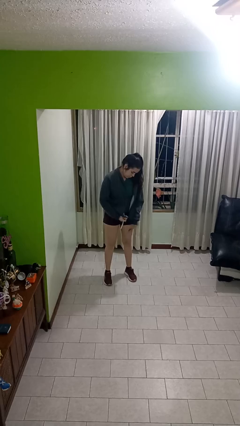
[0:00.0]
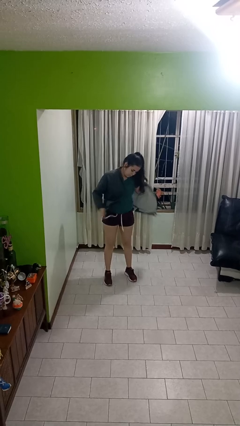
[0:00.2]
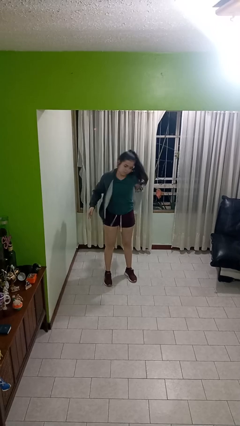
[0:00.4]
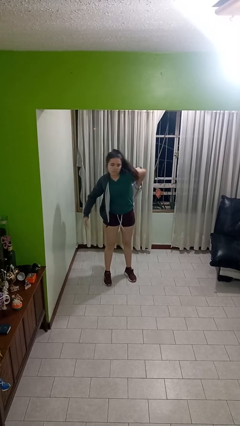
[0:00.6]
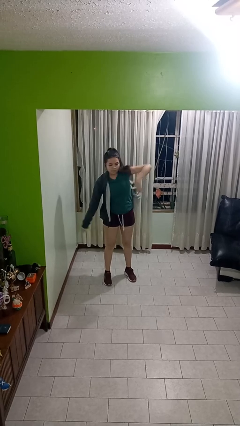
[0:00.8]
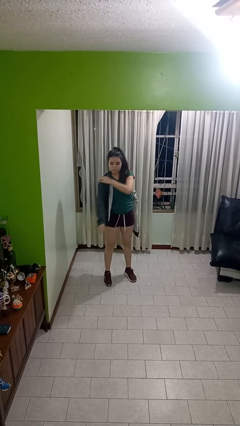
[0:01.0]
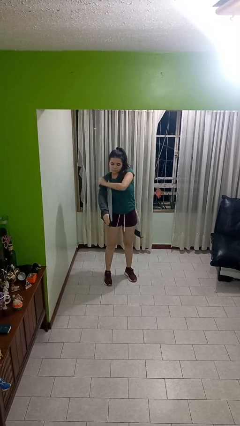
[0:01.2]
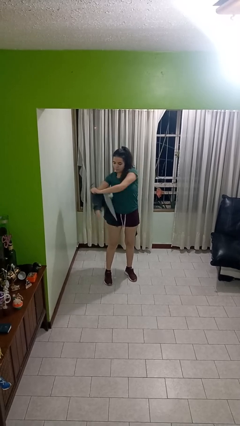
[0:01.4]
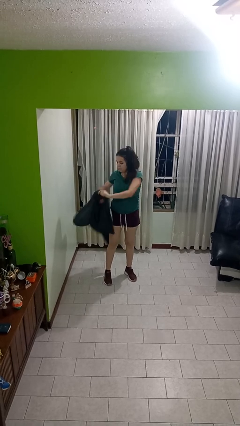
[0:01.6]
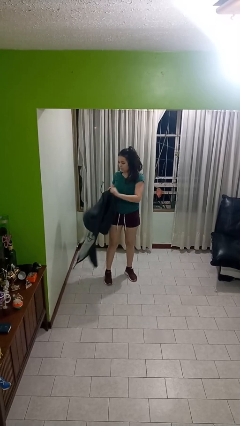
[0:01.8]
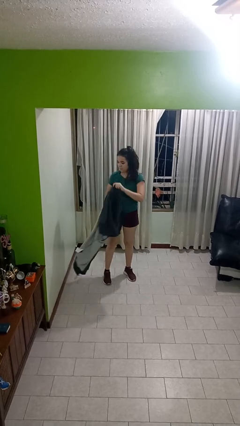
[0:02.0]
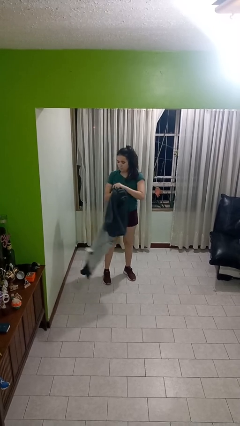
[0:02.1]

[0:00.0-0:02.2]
person takes off jacket

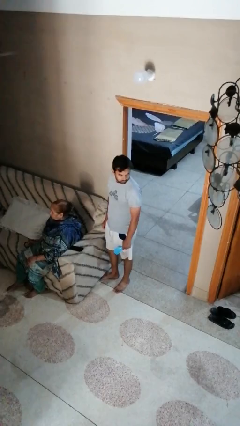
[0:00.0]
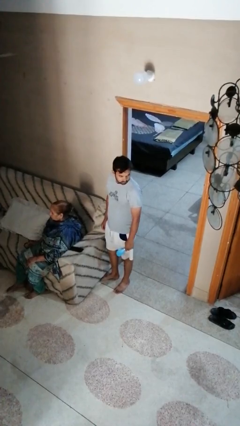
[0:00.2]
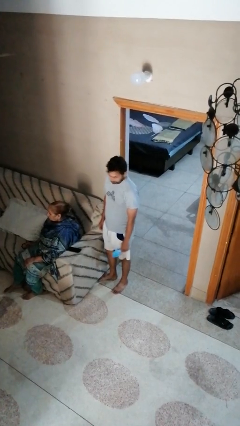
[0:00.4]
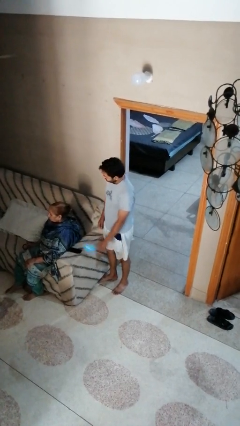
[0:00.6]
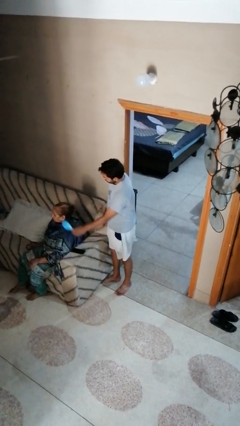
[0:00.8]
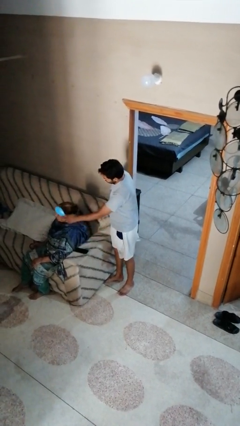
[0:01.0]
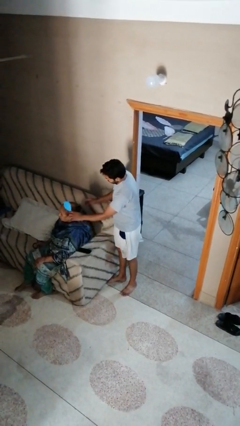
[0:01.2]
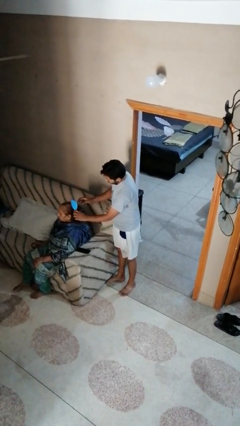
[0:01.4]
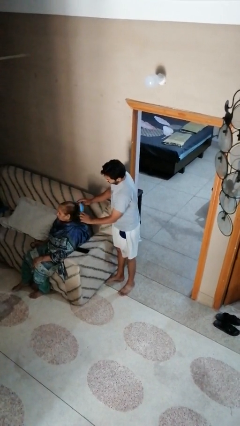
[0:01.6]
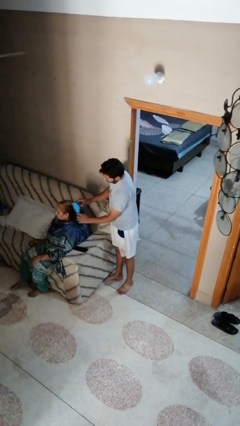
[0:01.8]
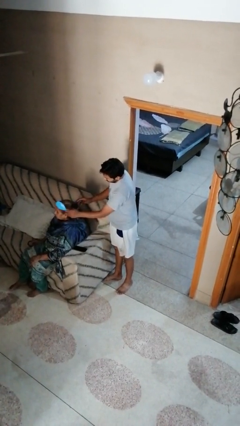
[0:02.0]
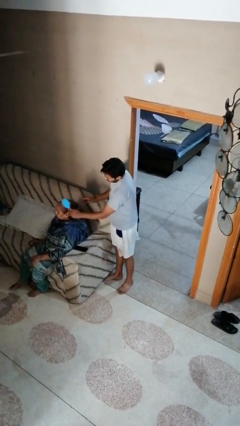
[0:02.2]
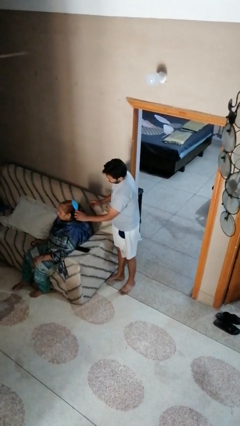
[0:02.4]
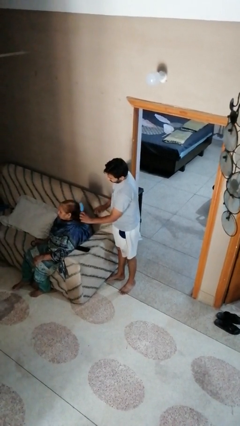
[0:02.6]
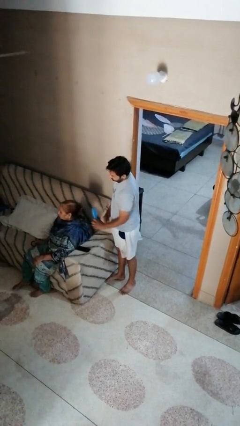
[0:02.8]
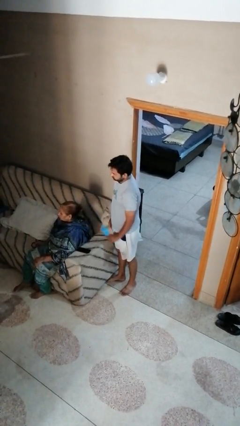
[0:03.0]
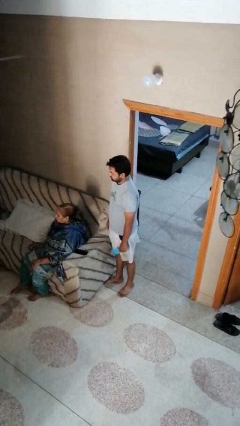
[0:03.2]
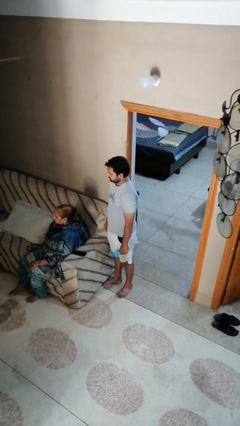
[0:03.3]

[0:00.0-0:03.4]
person brushes hair of person

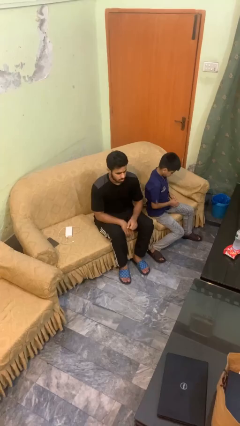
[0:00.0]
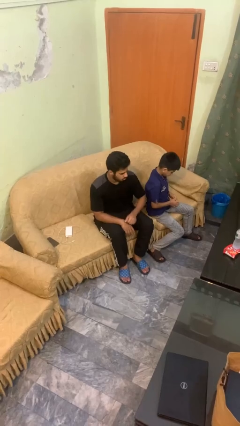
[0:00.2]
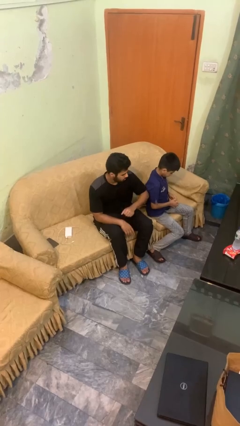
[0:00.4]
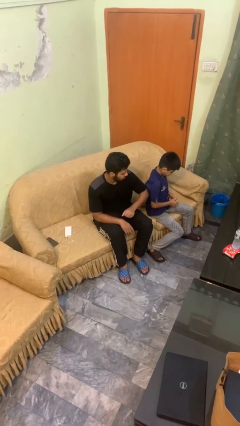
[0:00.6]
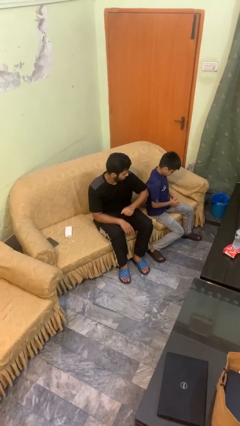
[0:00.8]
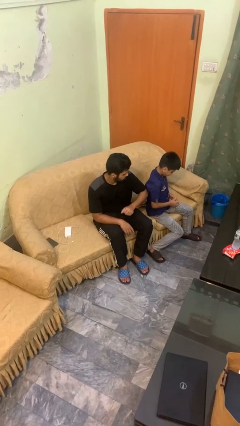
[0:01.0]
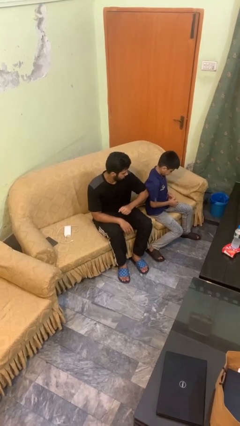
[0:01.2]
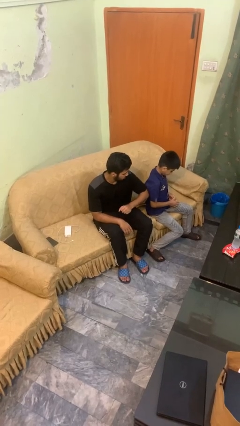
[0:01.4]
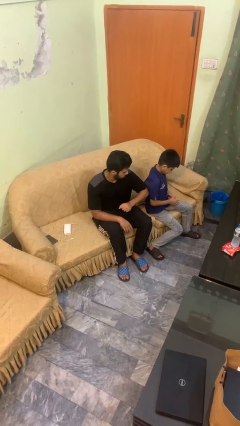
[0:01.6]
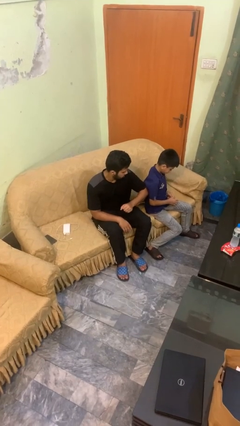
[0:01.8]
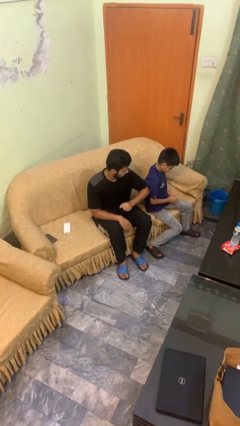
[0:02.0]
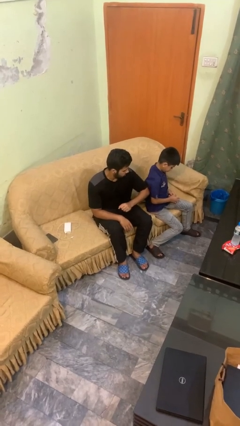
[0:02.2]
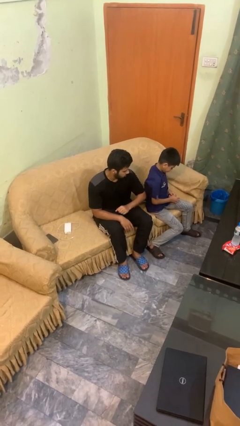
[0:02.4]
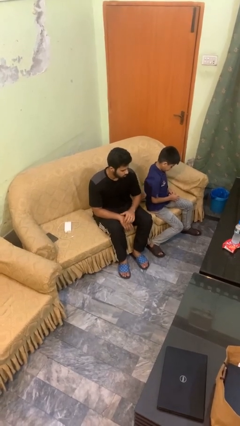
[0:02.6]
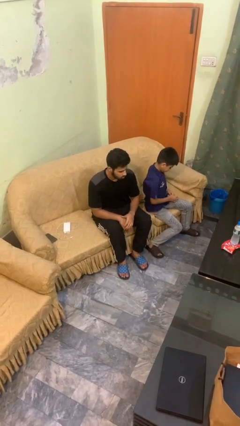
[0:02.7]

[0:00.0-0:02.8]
person nudges person with elbow

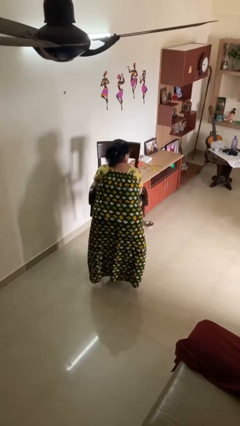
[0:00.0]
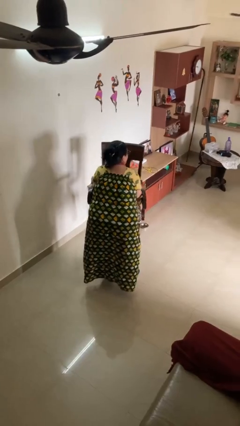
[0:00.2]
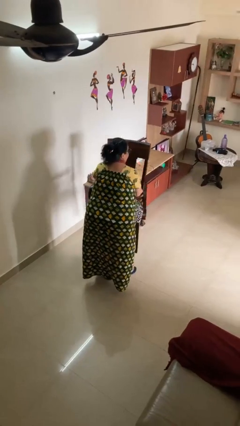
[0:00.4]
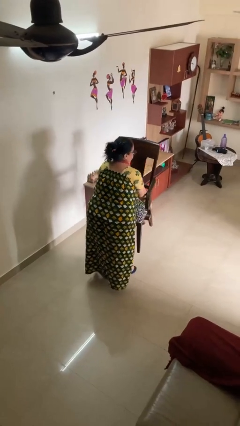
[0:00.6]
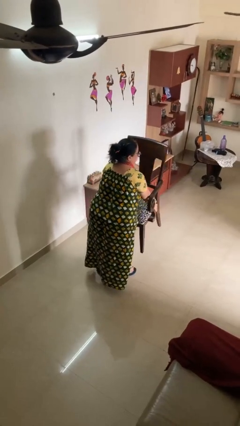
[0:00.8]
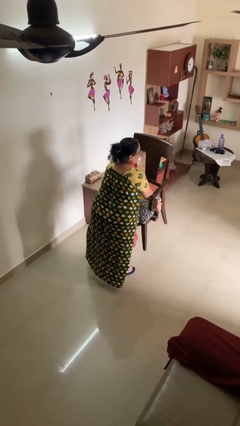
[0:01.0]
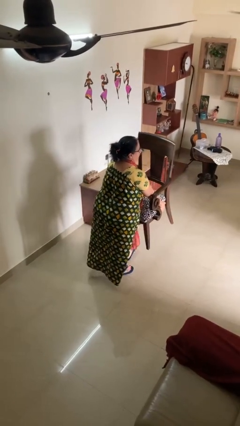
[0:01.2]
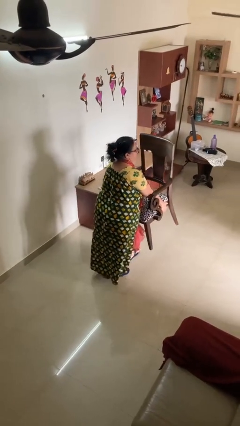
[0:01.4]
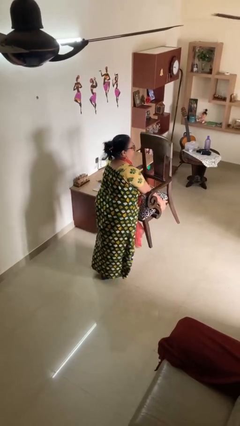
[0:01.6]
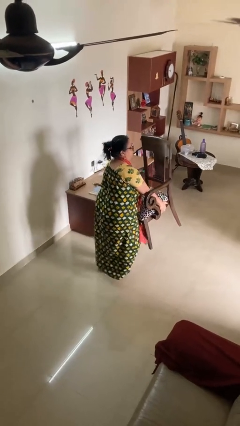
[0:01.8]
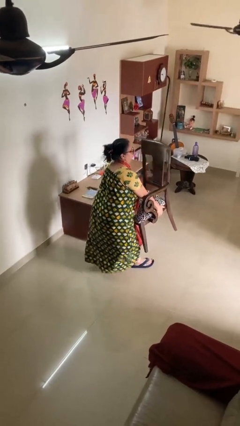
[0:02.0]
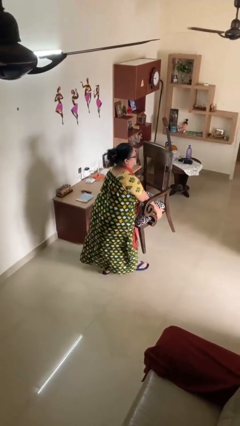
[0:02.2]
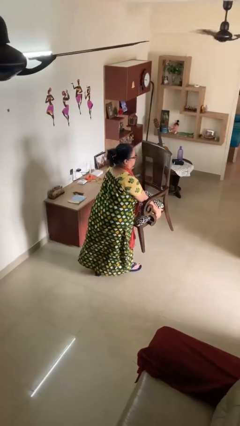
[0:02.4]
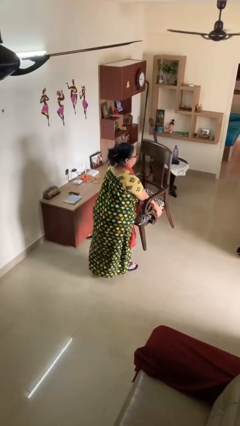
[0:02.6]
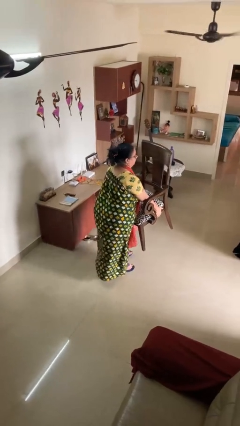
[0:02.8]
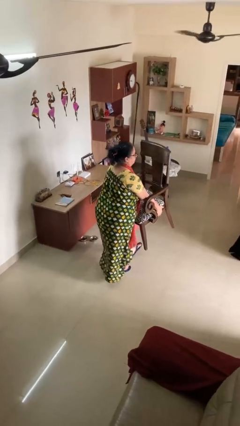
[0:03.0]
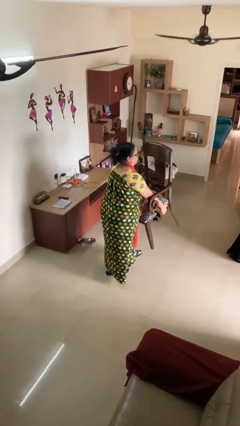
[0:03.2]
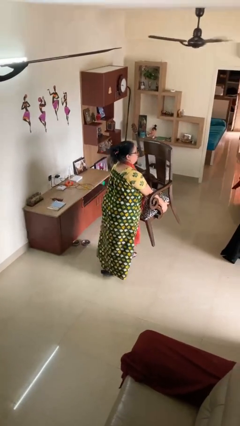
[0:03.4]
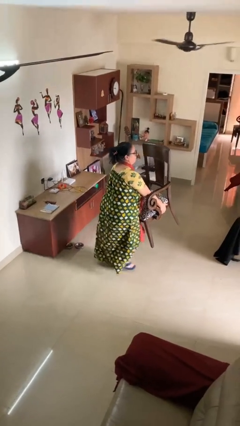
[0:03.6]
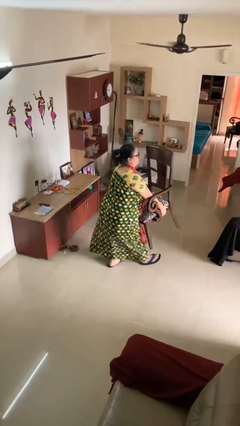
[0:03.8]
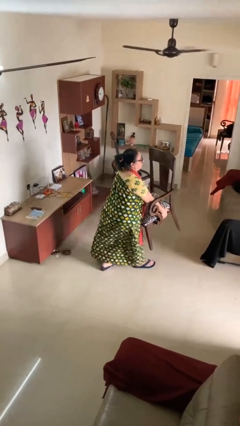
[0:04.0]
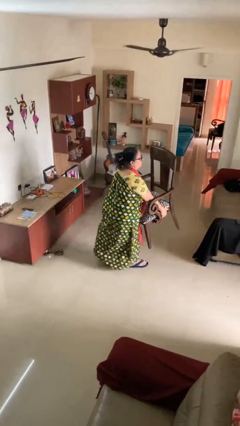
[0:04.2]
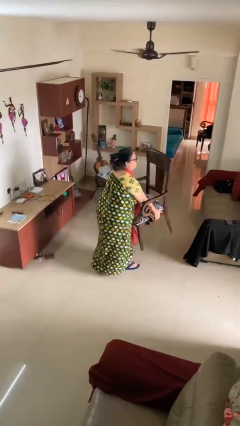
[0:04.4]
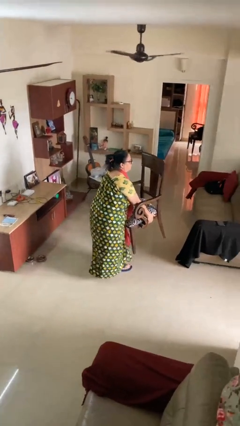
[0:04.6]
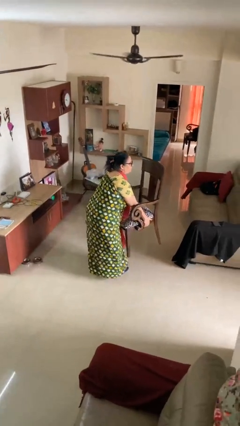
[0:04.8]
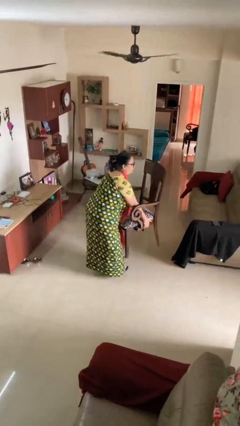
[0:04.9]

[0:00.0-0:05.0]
person carries heavy object

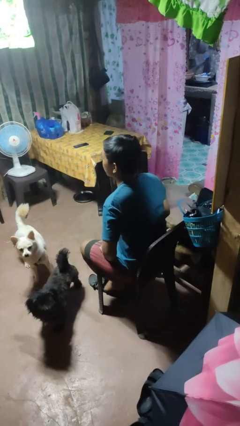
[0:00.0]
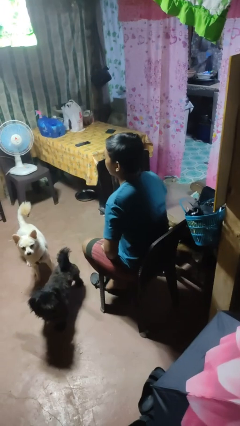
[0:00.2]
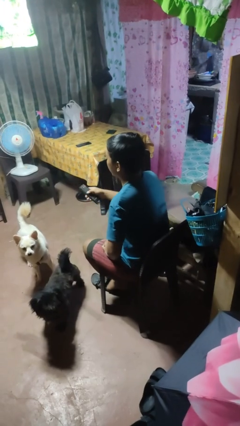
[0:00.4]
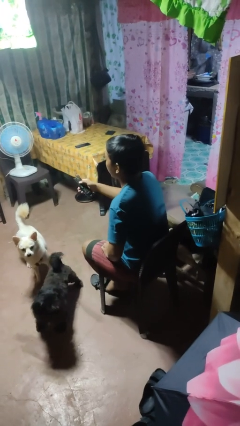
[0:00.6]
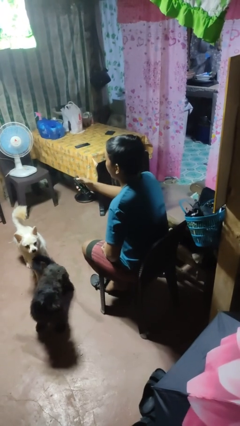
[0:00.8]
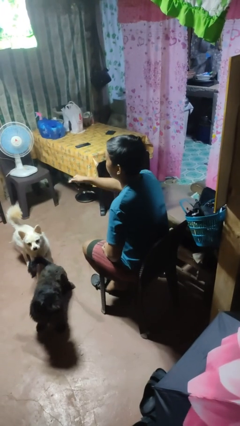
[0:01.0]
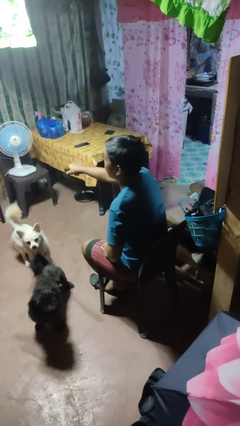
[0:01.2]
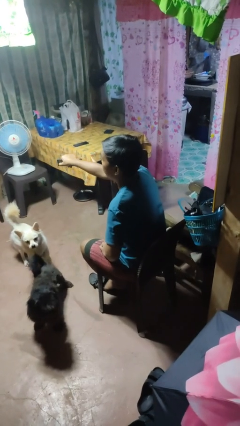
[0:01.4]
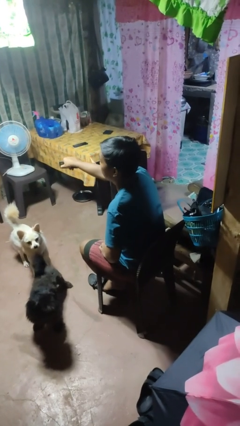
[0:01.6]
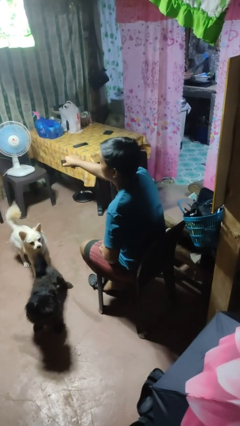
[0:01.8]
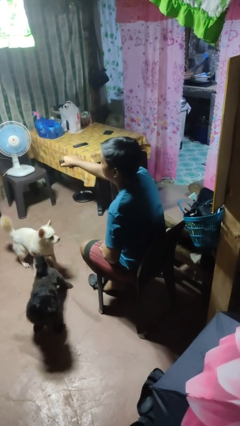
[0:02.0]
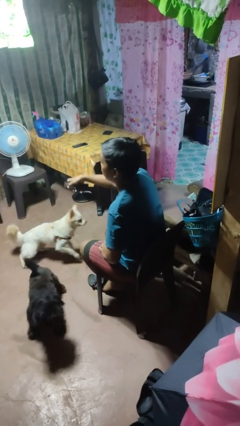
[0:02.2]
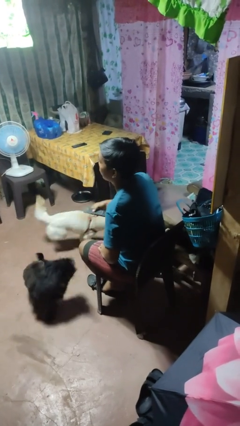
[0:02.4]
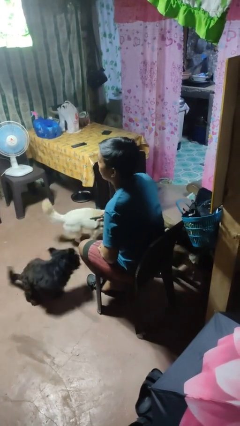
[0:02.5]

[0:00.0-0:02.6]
person uses television remote

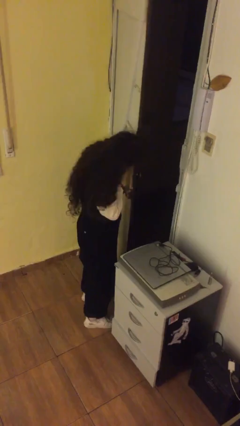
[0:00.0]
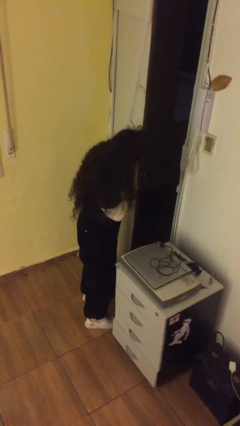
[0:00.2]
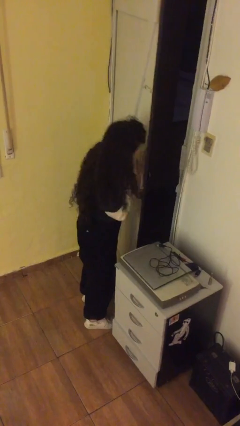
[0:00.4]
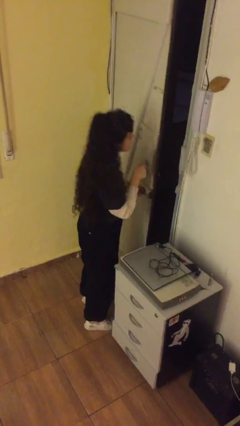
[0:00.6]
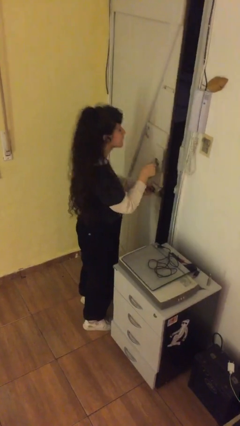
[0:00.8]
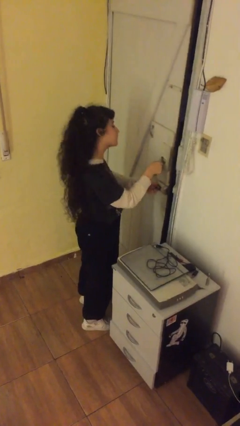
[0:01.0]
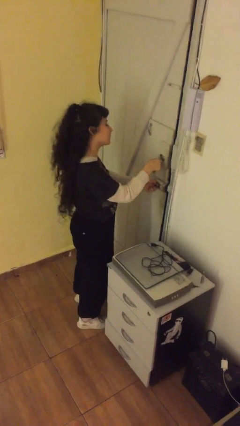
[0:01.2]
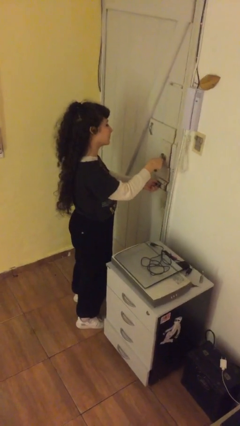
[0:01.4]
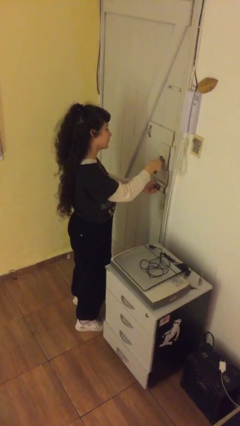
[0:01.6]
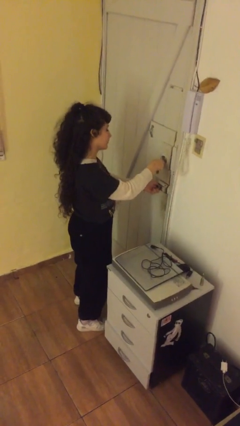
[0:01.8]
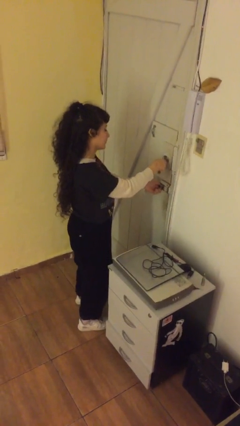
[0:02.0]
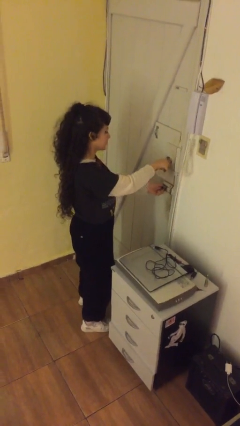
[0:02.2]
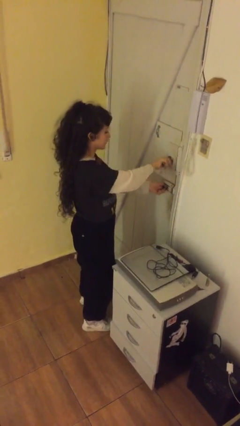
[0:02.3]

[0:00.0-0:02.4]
person closes facility door
